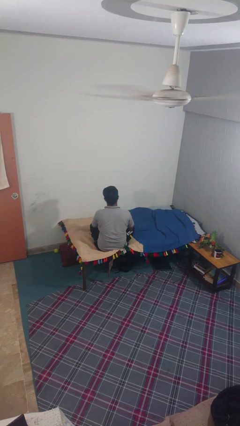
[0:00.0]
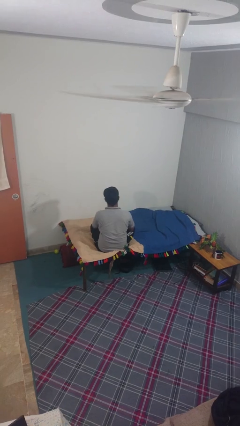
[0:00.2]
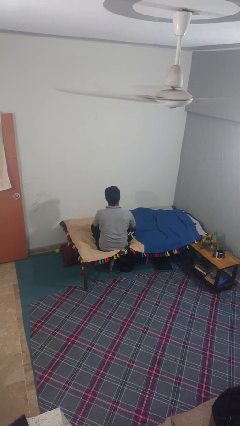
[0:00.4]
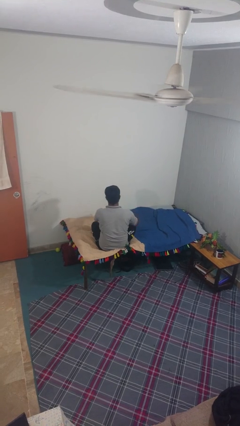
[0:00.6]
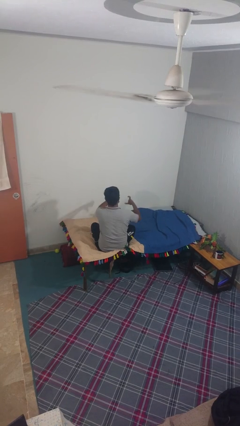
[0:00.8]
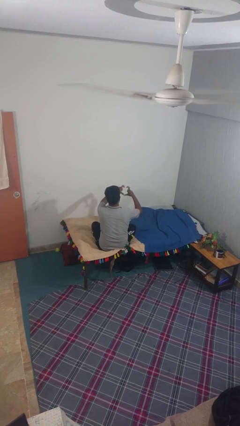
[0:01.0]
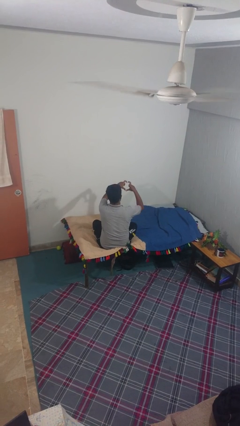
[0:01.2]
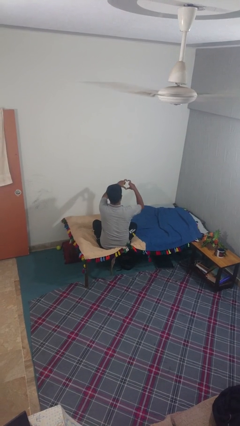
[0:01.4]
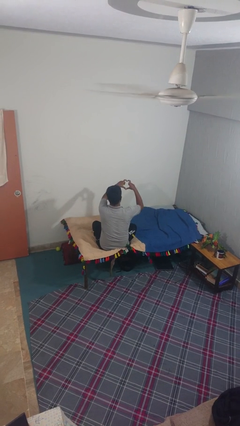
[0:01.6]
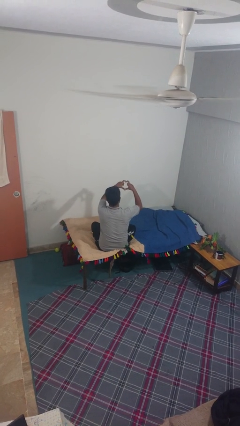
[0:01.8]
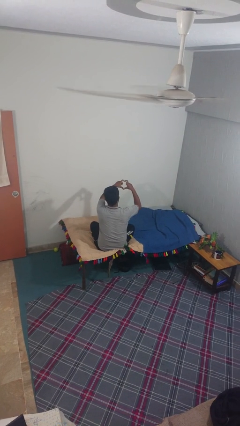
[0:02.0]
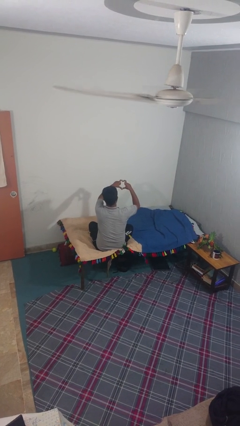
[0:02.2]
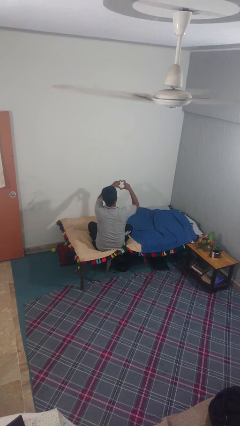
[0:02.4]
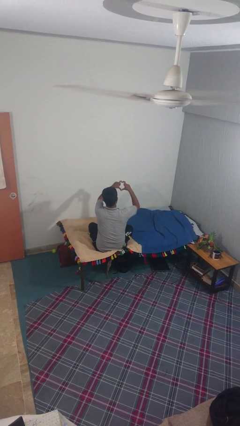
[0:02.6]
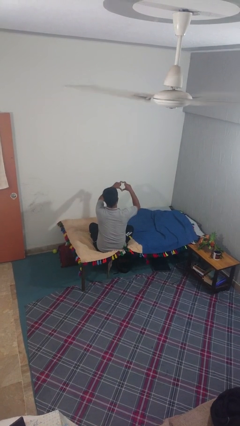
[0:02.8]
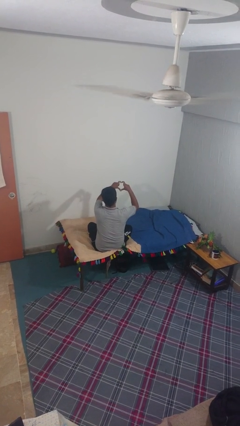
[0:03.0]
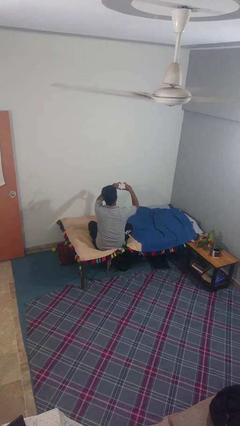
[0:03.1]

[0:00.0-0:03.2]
person gestures heart

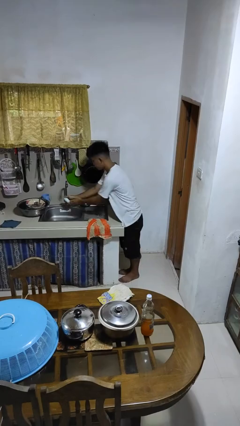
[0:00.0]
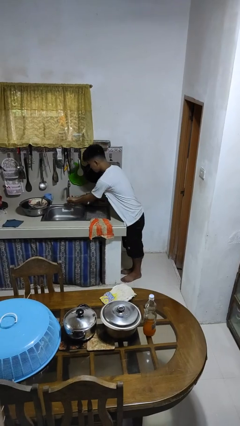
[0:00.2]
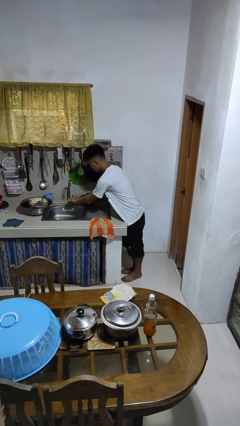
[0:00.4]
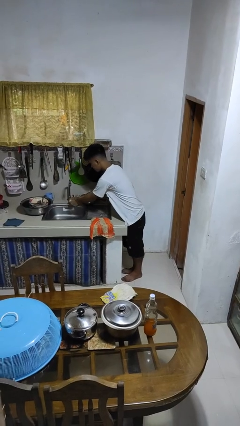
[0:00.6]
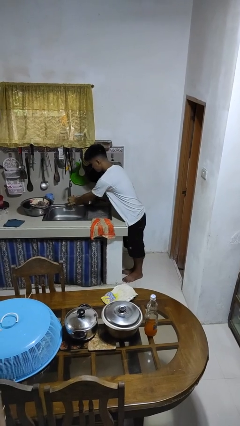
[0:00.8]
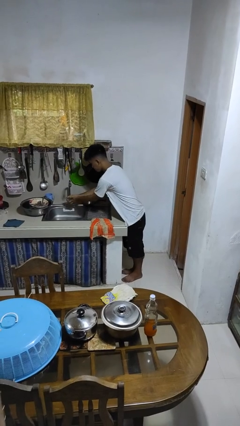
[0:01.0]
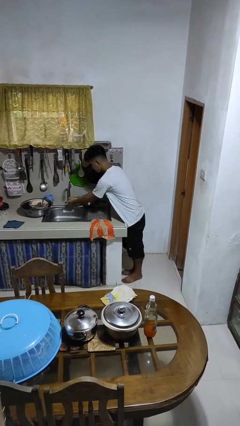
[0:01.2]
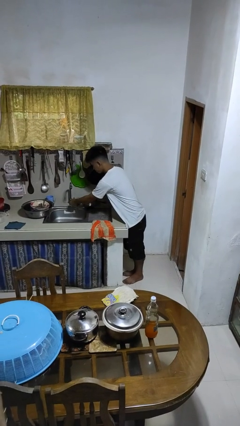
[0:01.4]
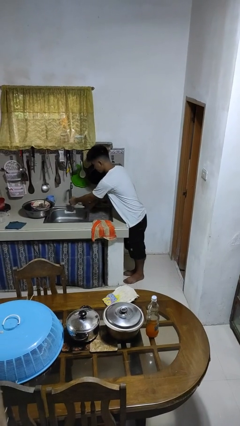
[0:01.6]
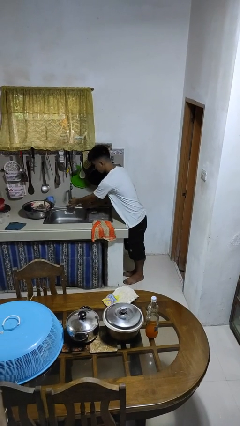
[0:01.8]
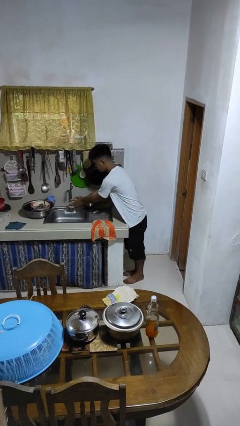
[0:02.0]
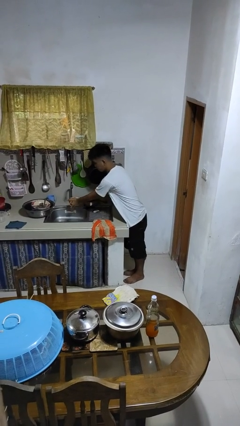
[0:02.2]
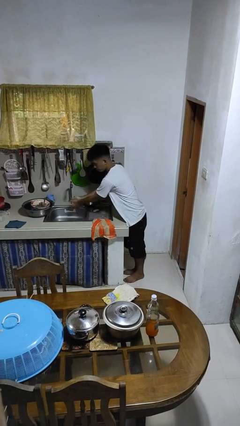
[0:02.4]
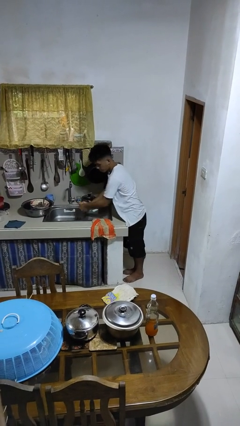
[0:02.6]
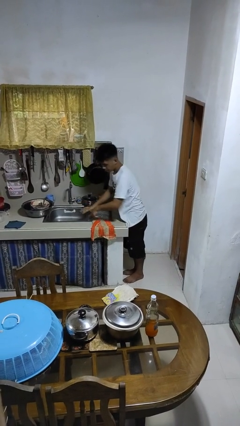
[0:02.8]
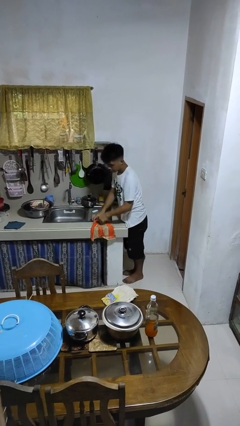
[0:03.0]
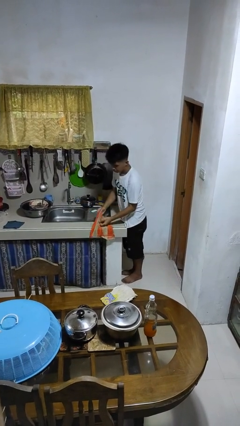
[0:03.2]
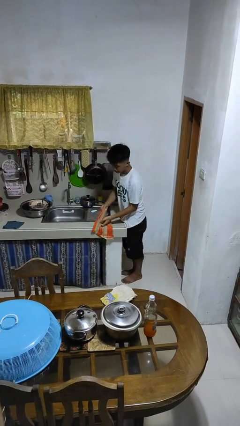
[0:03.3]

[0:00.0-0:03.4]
person washes hands

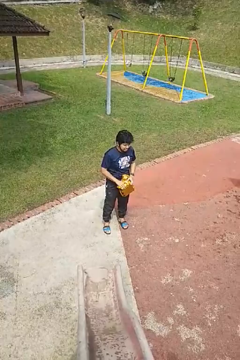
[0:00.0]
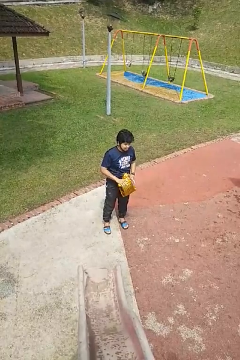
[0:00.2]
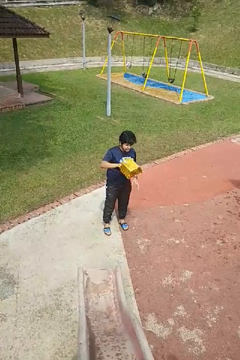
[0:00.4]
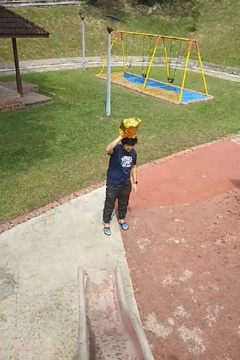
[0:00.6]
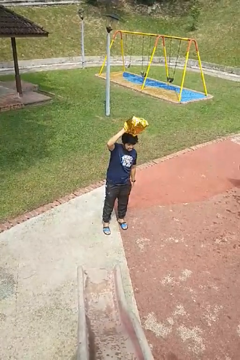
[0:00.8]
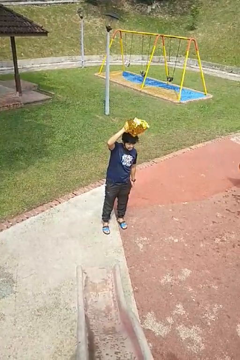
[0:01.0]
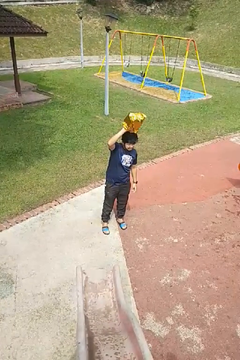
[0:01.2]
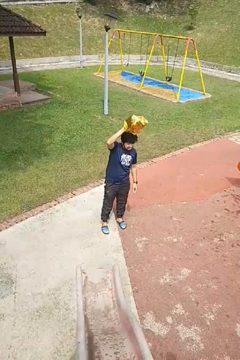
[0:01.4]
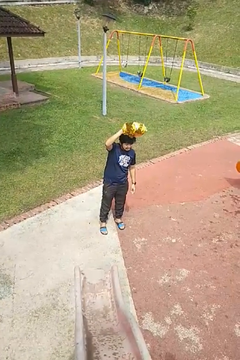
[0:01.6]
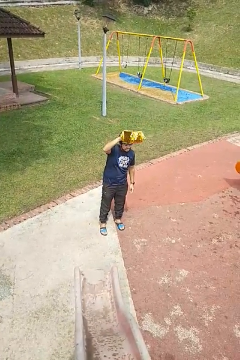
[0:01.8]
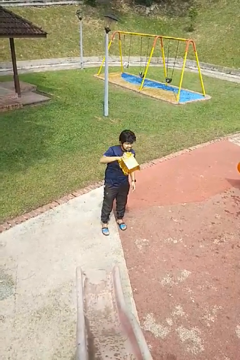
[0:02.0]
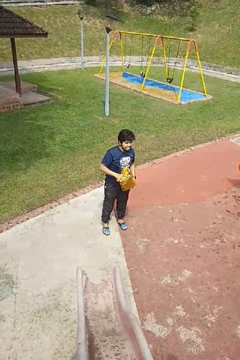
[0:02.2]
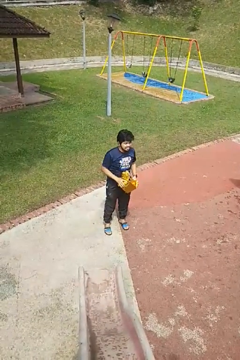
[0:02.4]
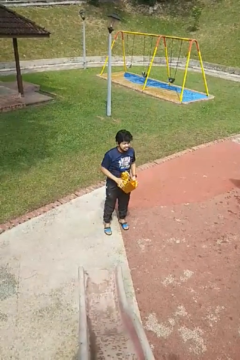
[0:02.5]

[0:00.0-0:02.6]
person holds object above head

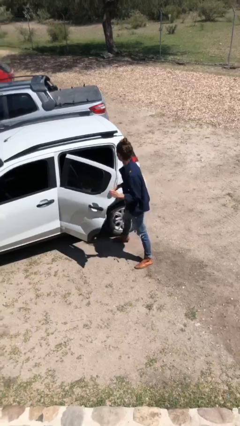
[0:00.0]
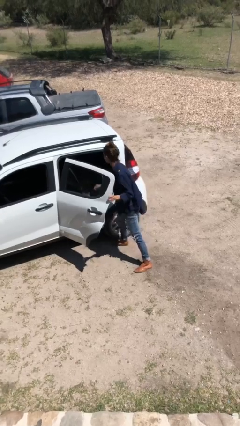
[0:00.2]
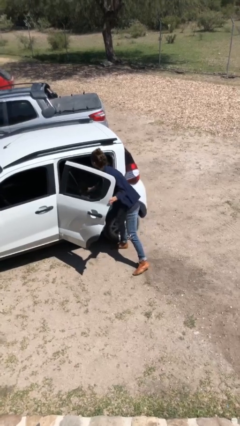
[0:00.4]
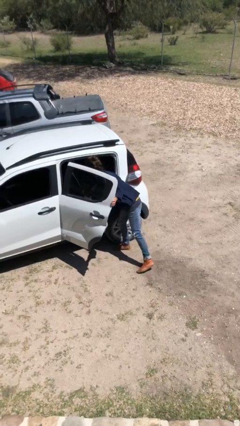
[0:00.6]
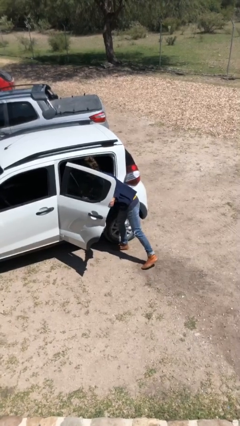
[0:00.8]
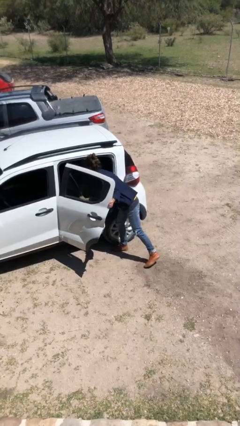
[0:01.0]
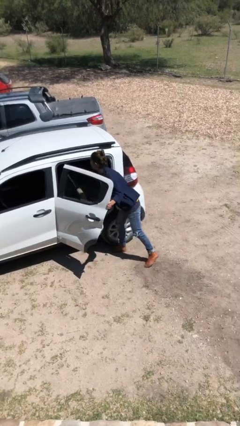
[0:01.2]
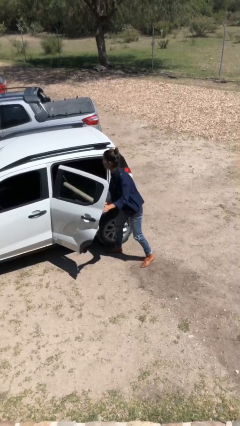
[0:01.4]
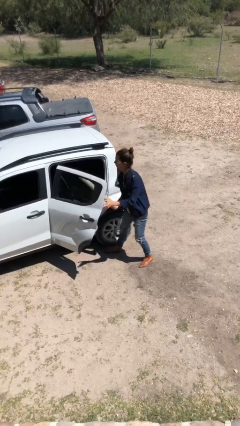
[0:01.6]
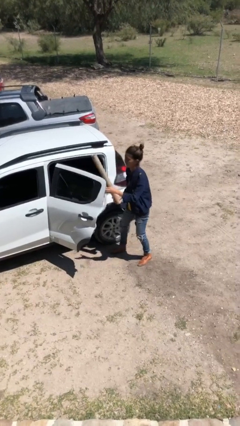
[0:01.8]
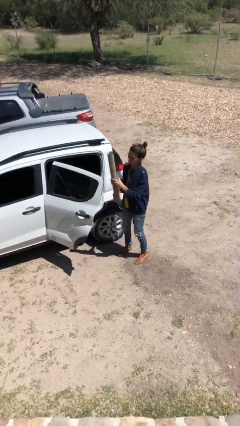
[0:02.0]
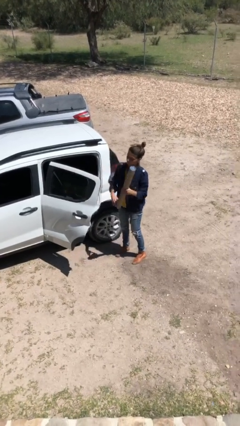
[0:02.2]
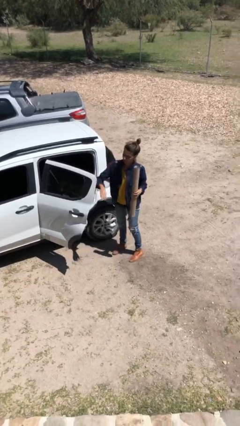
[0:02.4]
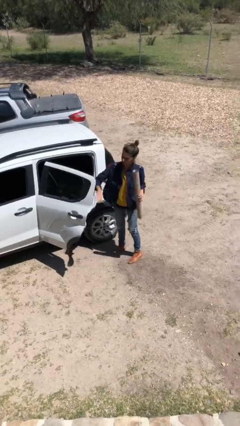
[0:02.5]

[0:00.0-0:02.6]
person unloads car

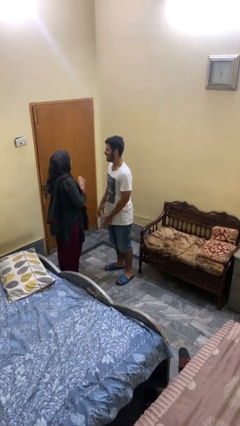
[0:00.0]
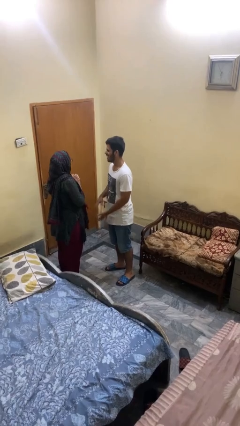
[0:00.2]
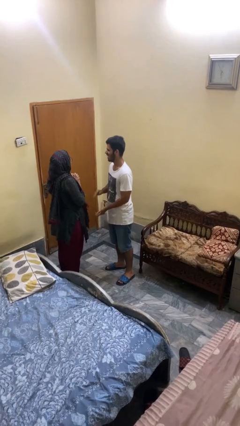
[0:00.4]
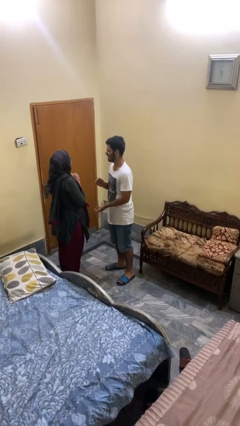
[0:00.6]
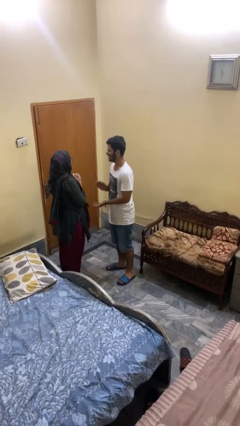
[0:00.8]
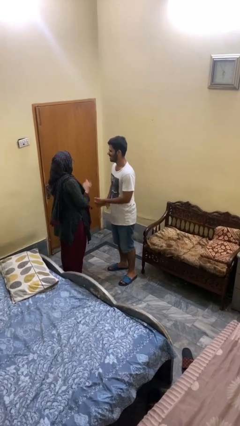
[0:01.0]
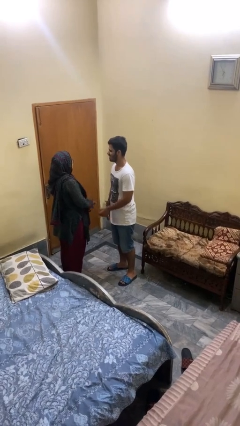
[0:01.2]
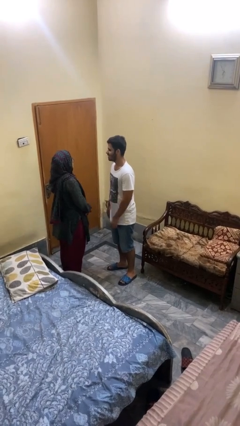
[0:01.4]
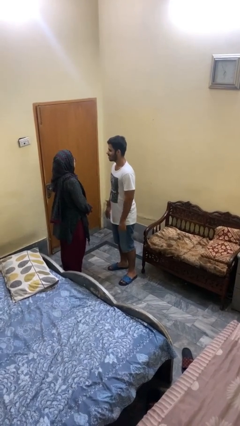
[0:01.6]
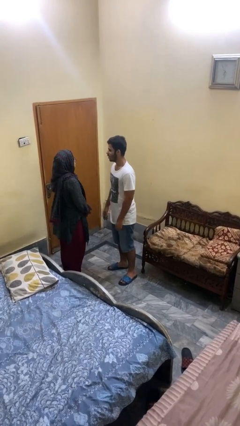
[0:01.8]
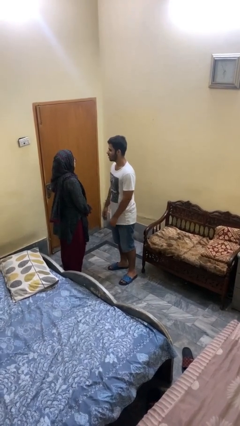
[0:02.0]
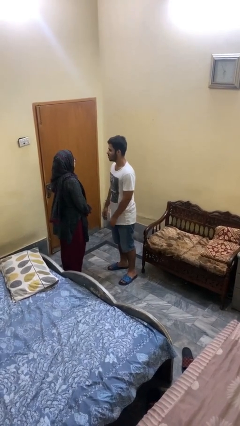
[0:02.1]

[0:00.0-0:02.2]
person laughs with person

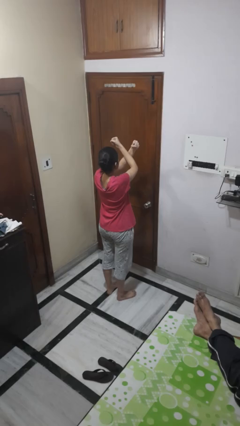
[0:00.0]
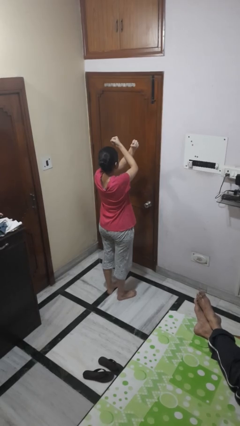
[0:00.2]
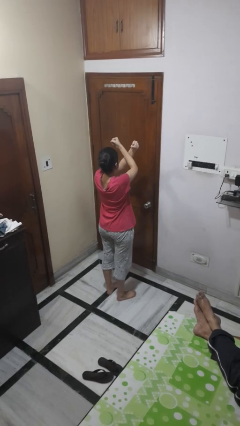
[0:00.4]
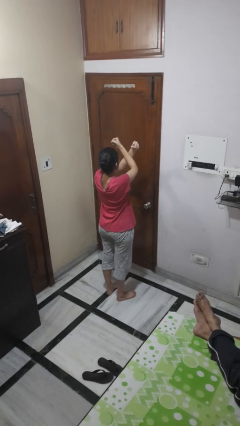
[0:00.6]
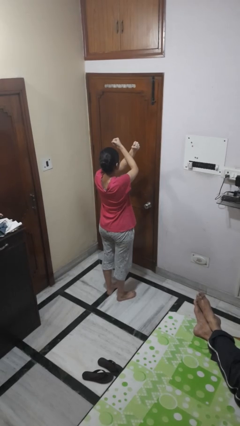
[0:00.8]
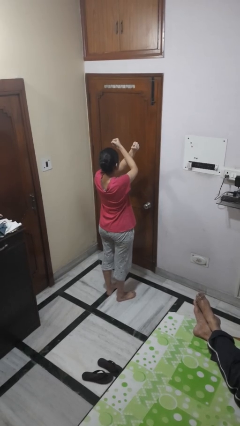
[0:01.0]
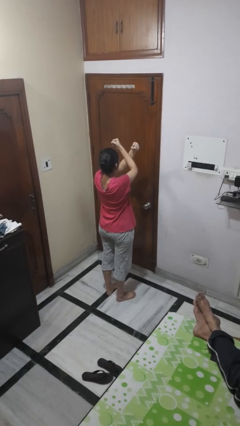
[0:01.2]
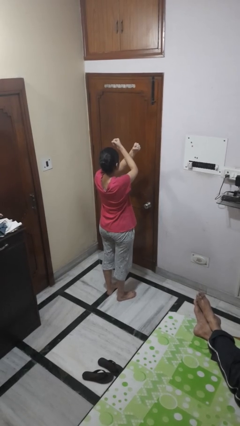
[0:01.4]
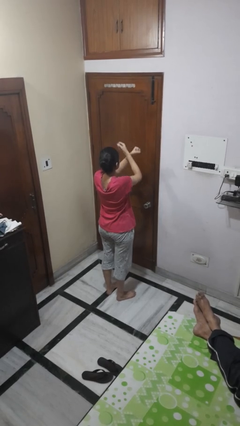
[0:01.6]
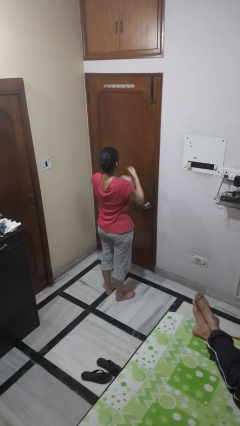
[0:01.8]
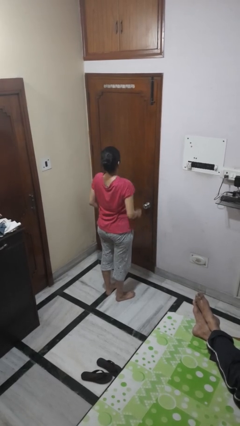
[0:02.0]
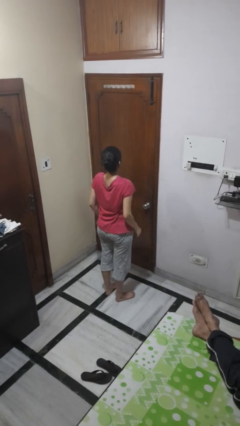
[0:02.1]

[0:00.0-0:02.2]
person gestures arms x

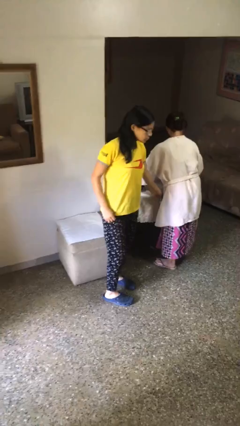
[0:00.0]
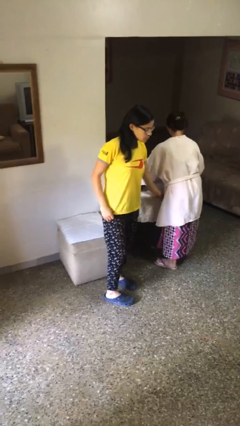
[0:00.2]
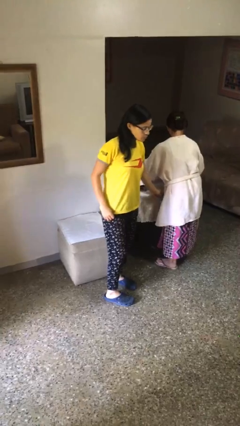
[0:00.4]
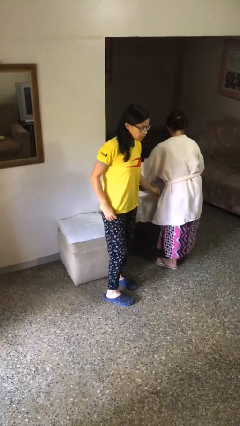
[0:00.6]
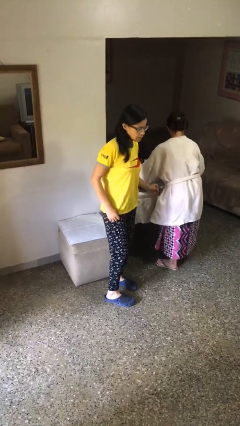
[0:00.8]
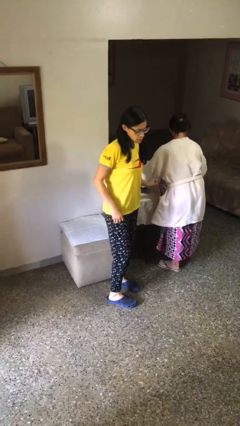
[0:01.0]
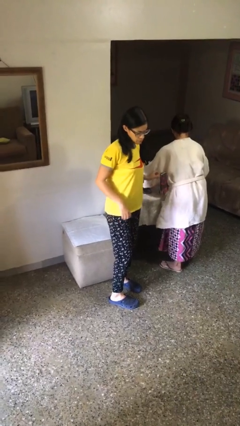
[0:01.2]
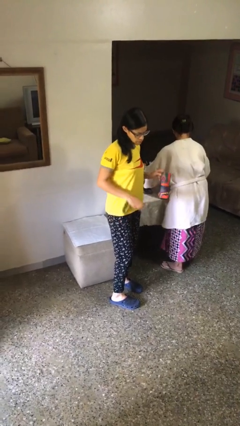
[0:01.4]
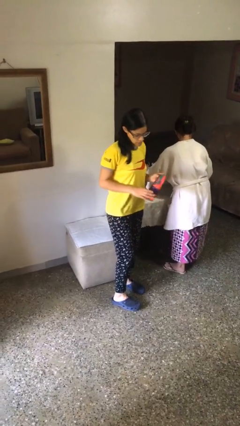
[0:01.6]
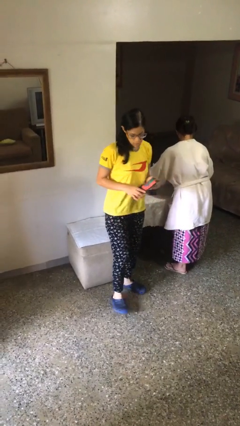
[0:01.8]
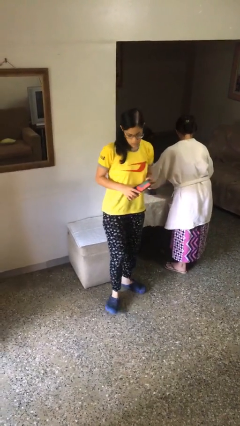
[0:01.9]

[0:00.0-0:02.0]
person steals object from person
